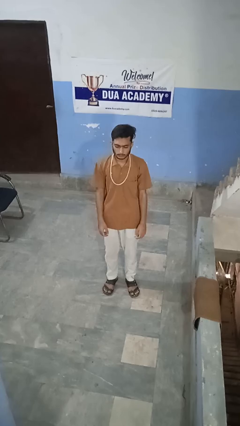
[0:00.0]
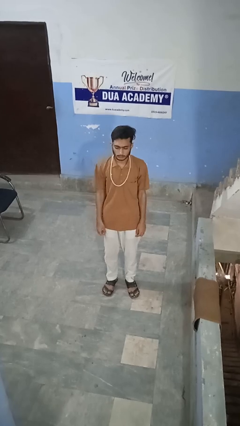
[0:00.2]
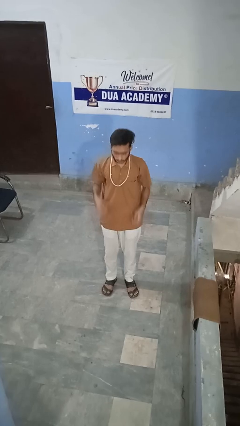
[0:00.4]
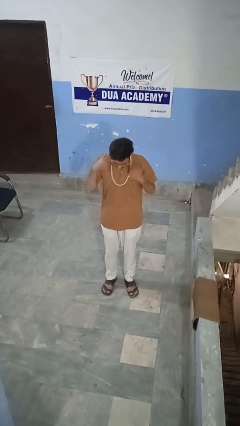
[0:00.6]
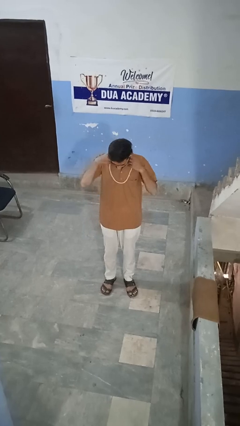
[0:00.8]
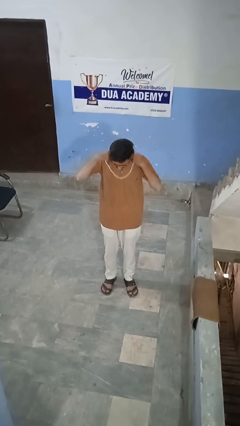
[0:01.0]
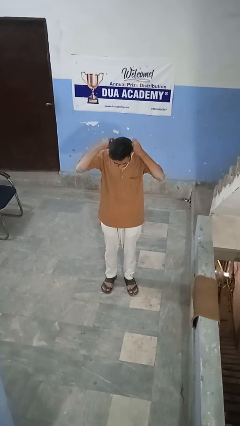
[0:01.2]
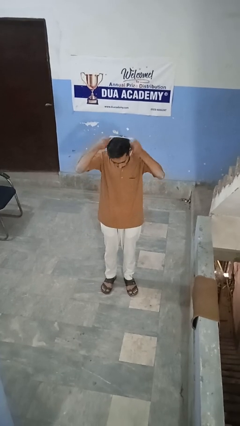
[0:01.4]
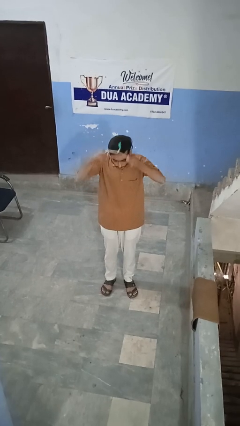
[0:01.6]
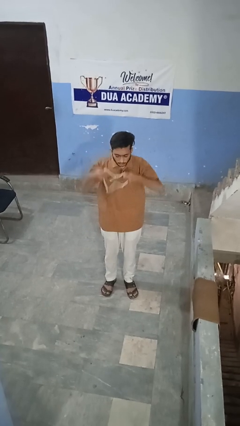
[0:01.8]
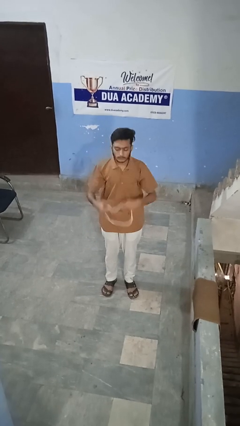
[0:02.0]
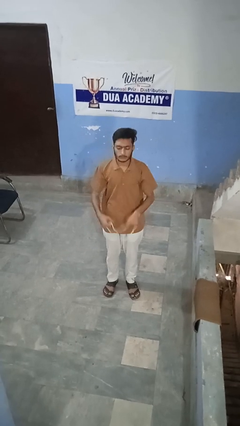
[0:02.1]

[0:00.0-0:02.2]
person takes off necklace

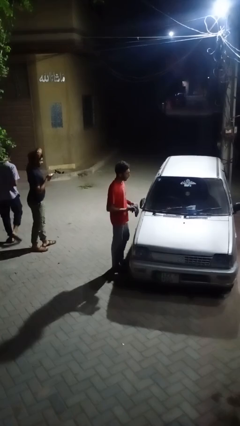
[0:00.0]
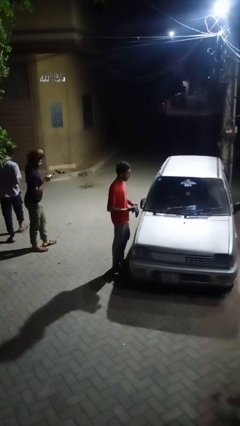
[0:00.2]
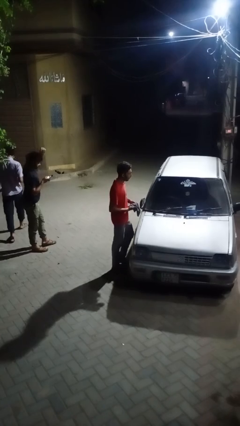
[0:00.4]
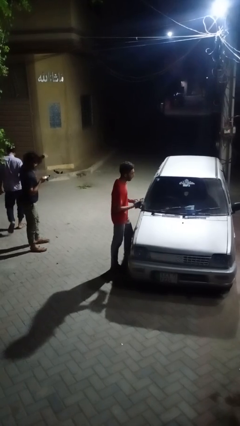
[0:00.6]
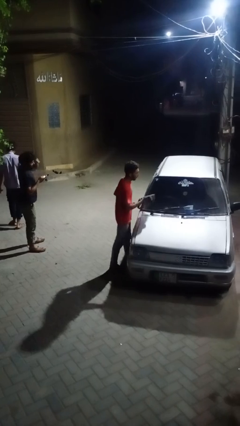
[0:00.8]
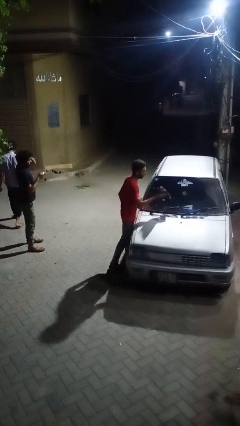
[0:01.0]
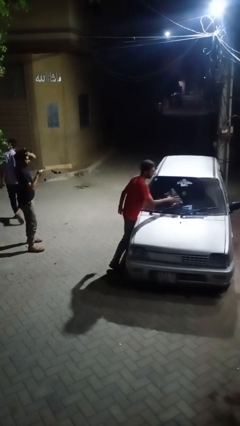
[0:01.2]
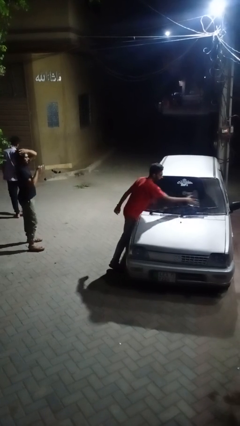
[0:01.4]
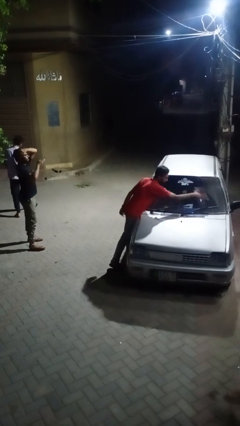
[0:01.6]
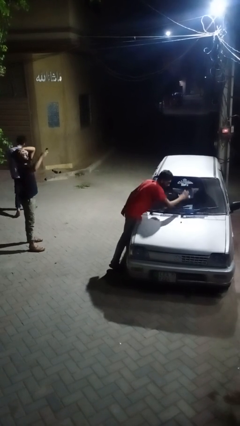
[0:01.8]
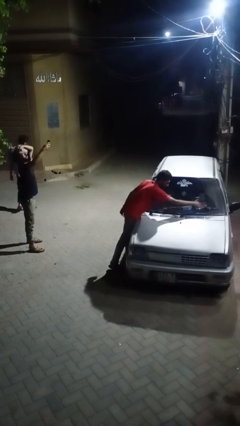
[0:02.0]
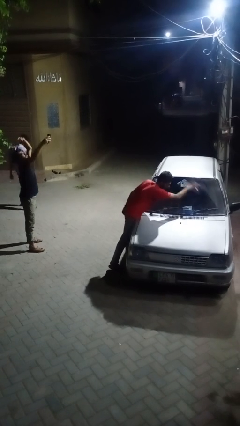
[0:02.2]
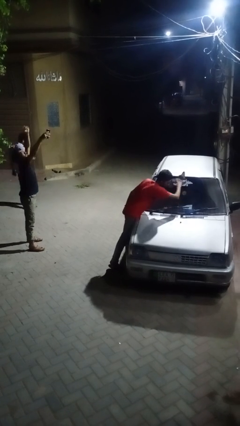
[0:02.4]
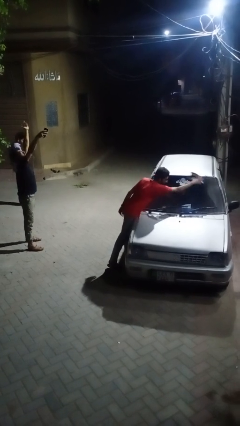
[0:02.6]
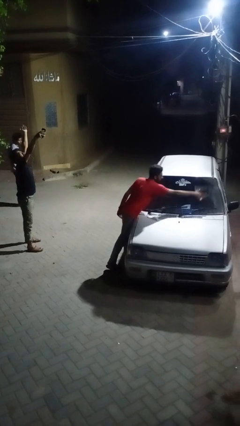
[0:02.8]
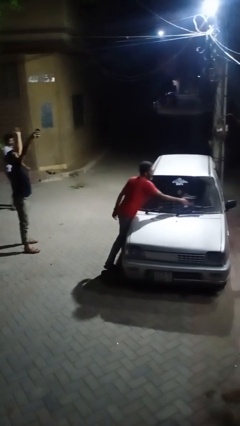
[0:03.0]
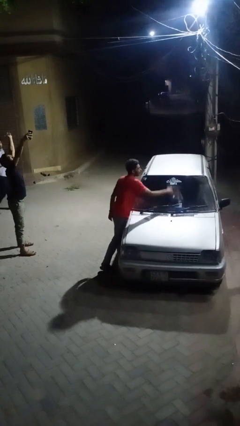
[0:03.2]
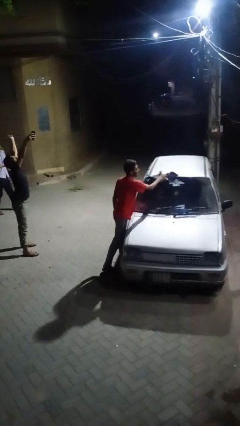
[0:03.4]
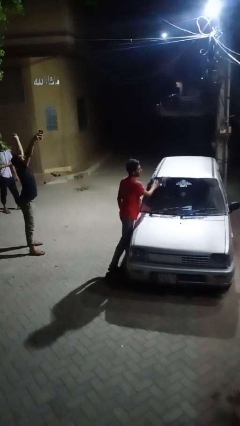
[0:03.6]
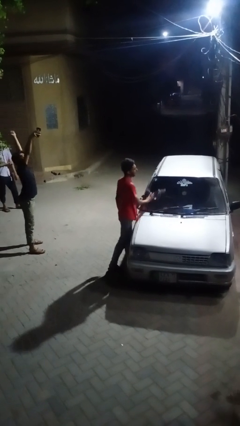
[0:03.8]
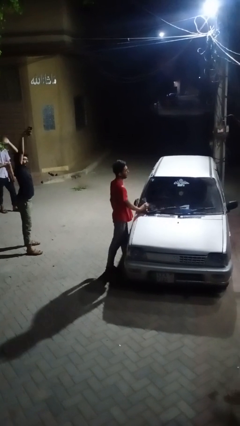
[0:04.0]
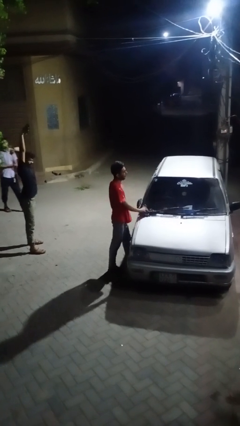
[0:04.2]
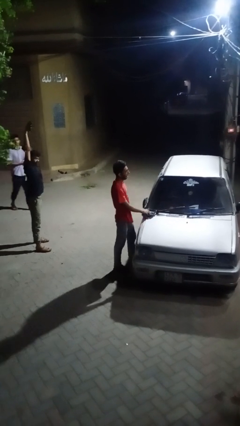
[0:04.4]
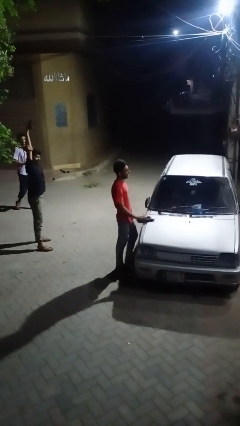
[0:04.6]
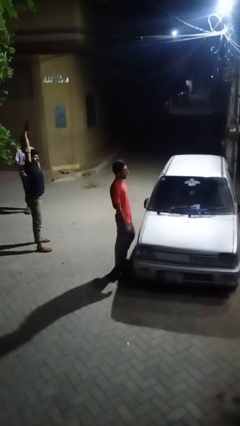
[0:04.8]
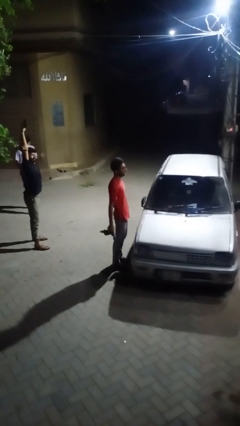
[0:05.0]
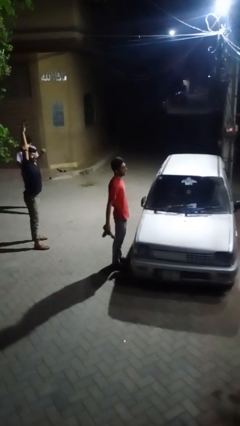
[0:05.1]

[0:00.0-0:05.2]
person polishes car with rag

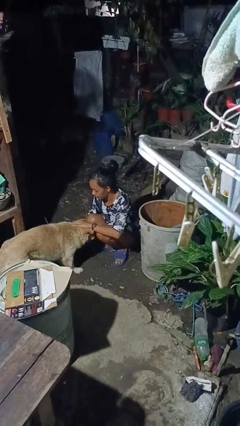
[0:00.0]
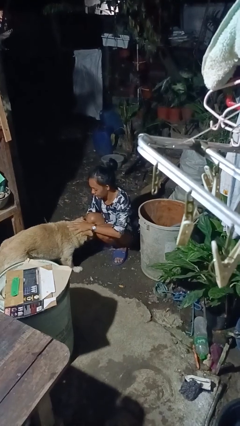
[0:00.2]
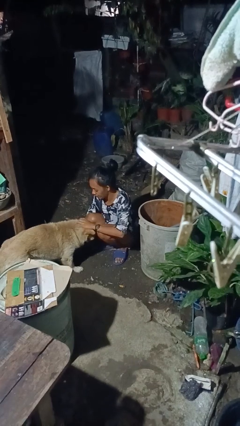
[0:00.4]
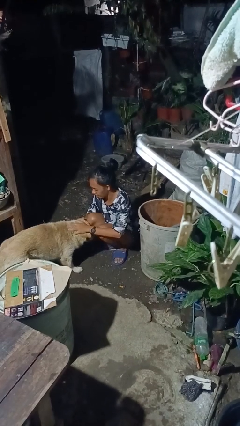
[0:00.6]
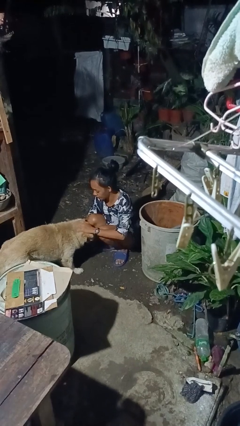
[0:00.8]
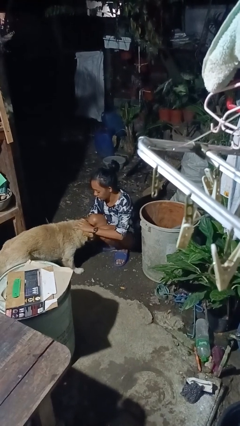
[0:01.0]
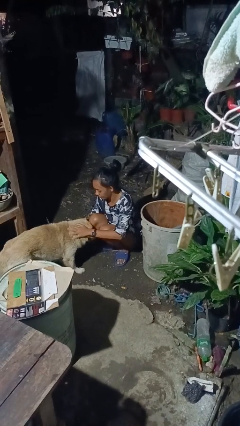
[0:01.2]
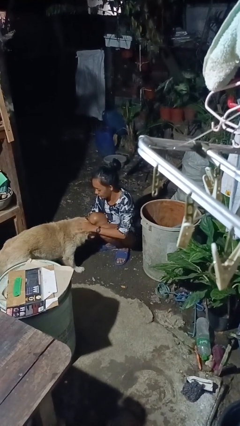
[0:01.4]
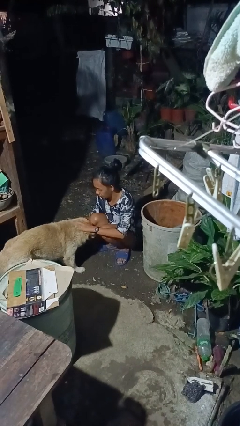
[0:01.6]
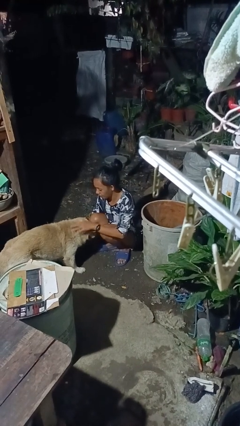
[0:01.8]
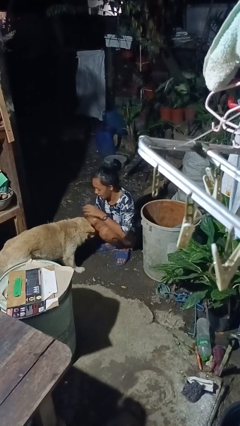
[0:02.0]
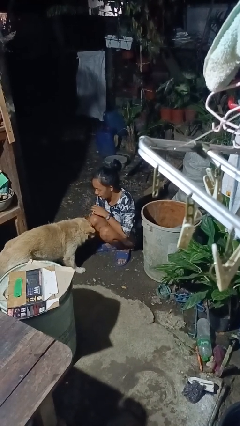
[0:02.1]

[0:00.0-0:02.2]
person pets dog

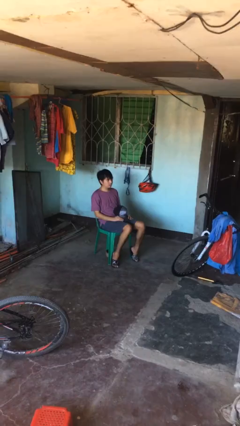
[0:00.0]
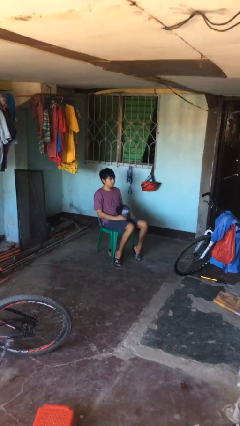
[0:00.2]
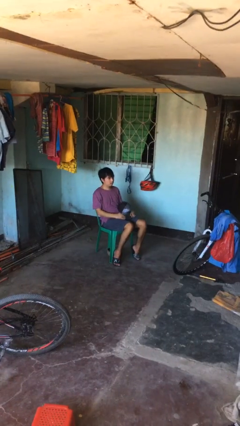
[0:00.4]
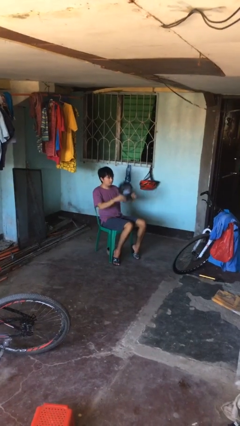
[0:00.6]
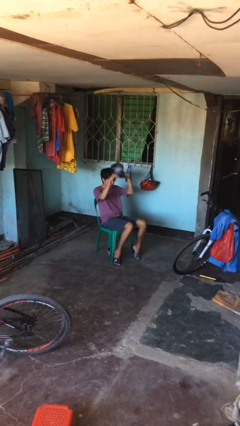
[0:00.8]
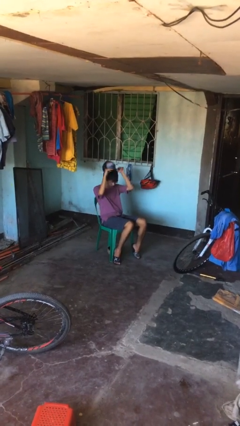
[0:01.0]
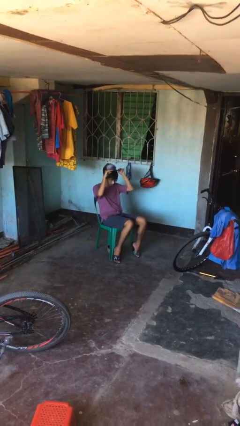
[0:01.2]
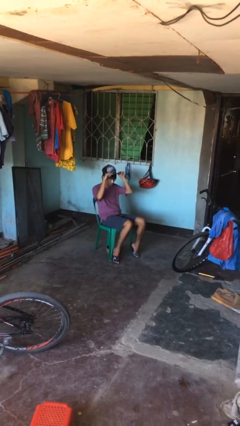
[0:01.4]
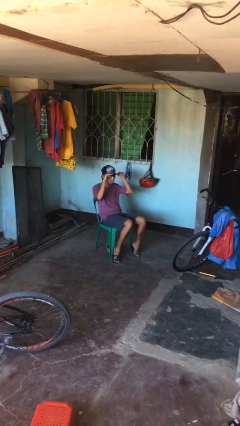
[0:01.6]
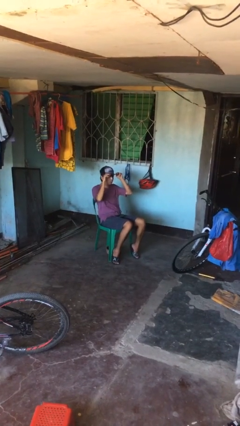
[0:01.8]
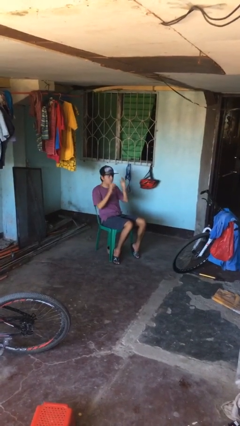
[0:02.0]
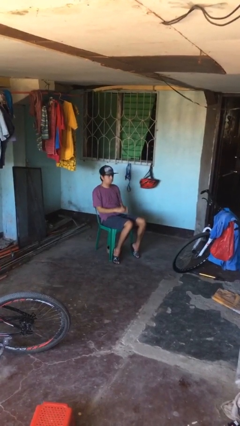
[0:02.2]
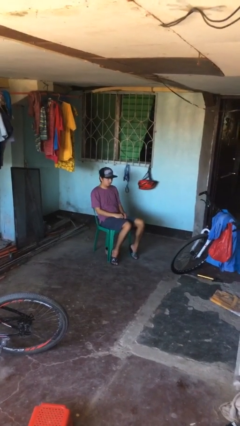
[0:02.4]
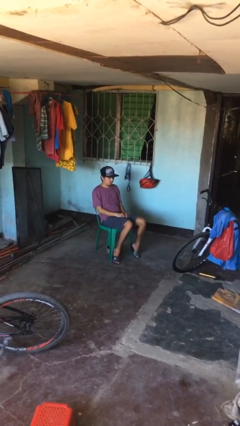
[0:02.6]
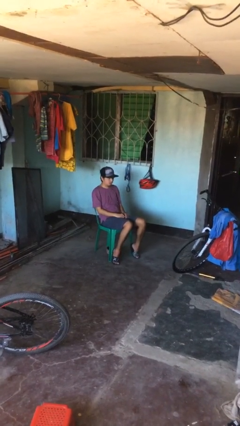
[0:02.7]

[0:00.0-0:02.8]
person puts on hat

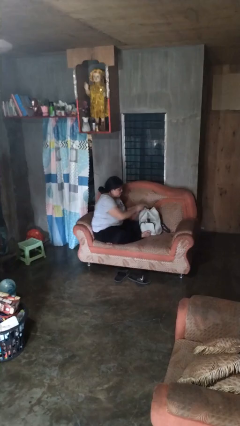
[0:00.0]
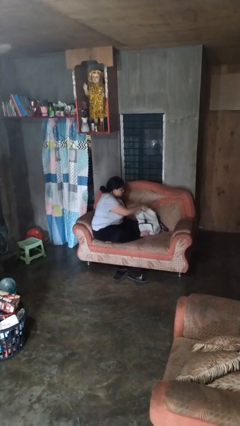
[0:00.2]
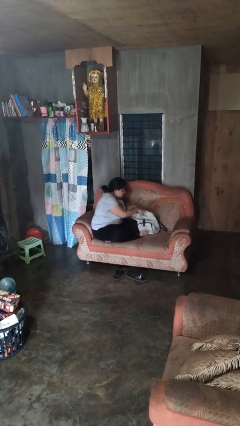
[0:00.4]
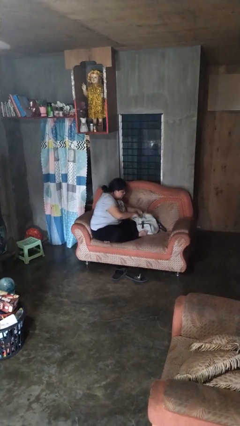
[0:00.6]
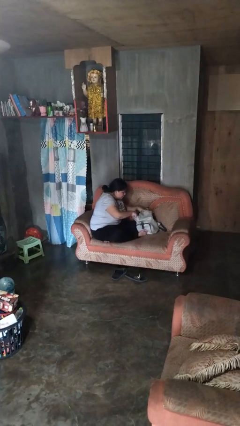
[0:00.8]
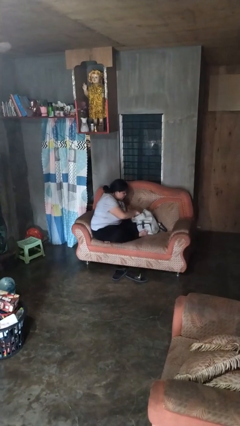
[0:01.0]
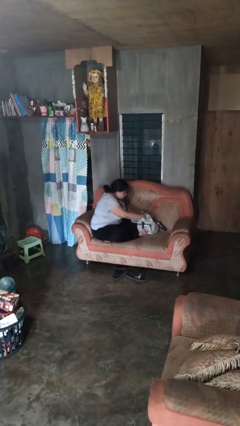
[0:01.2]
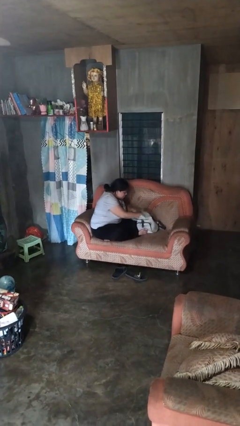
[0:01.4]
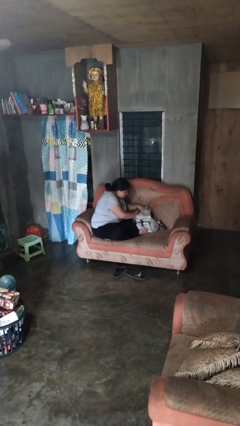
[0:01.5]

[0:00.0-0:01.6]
person searches in backpack

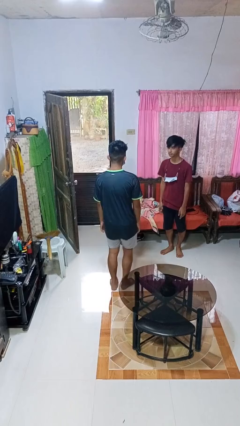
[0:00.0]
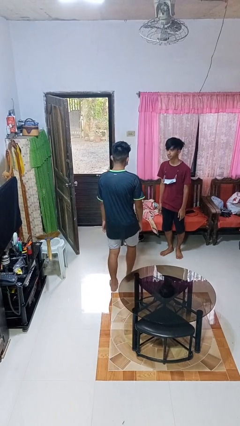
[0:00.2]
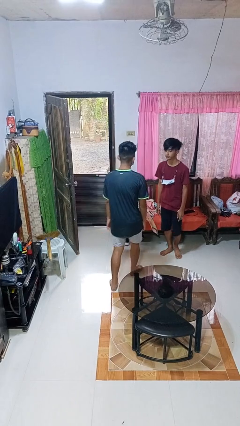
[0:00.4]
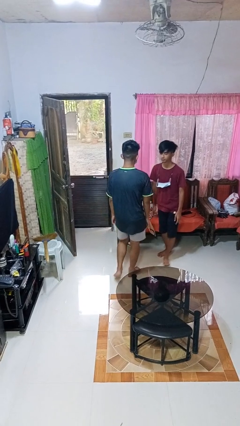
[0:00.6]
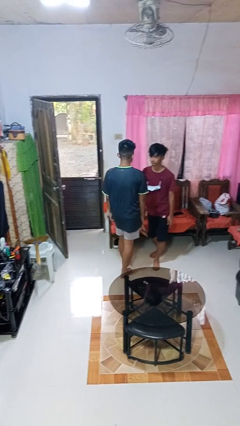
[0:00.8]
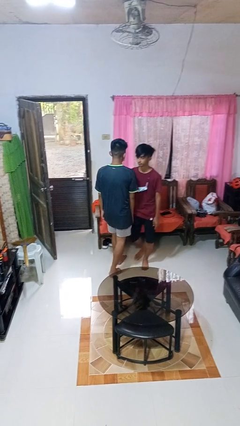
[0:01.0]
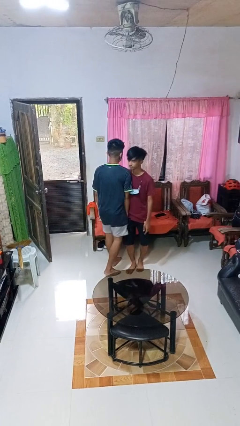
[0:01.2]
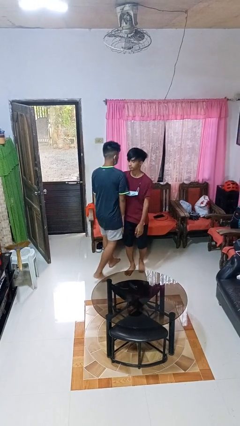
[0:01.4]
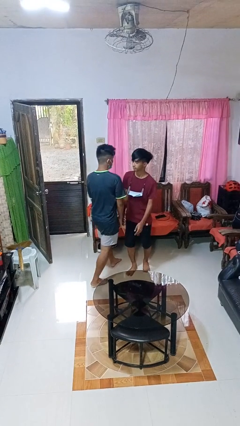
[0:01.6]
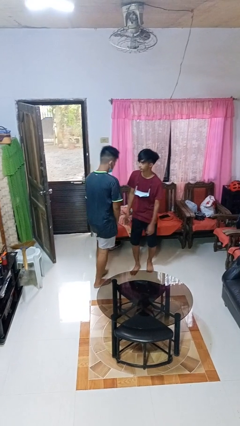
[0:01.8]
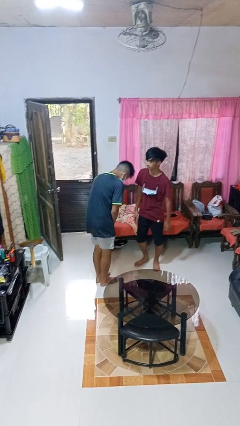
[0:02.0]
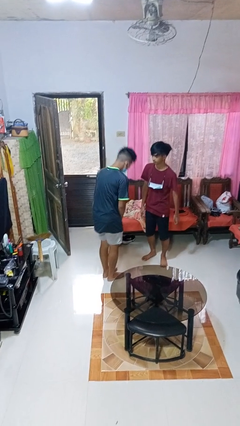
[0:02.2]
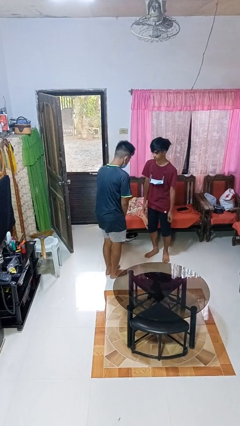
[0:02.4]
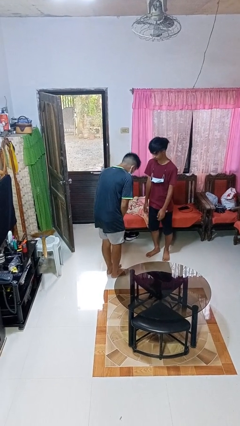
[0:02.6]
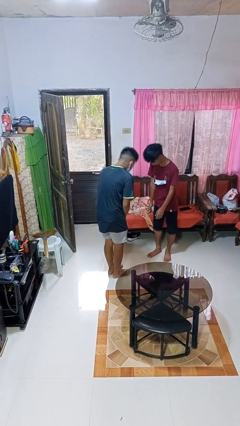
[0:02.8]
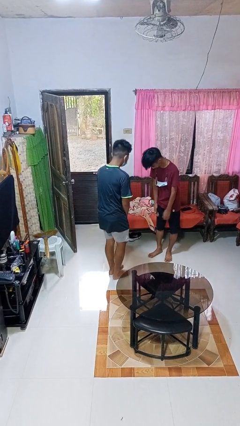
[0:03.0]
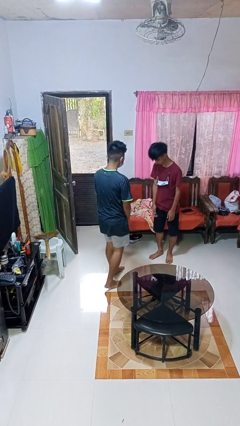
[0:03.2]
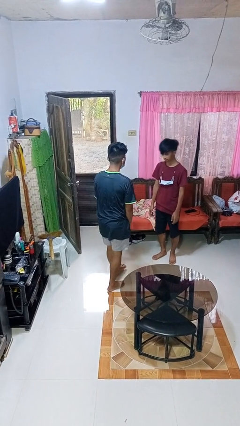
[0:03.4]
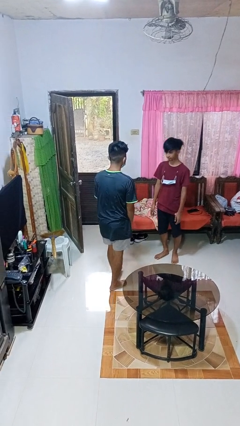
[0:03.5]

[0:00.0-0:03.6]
person bumps into person
